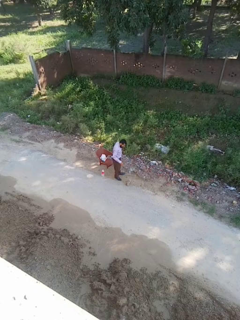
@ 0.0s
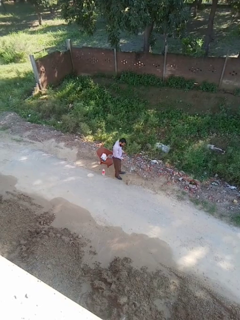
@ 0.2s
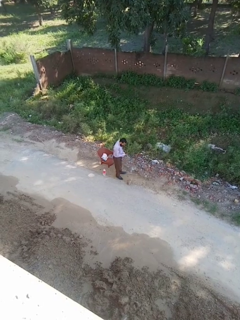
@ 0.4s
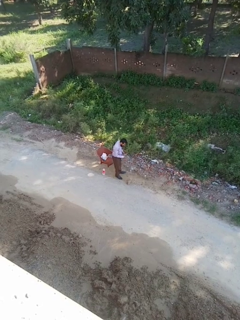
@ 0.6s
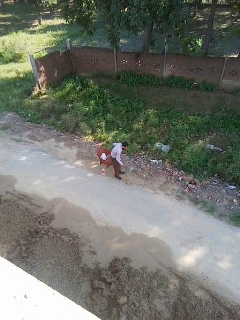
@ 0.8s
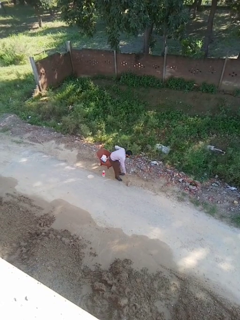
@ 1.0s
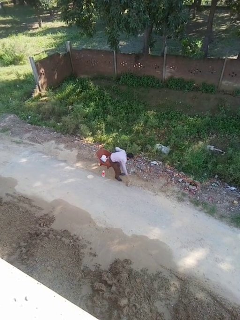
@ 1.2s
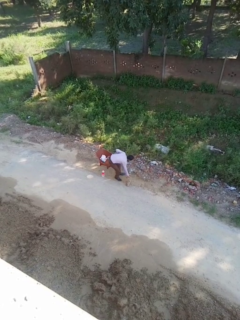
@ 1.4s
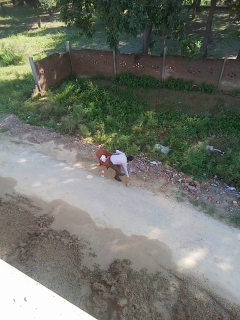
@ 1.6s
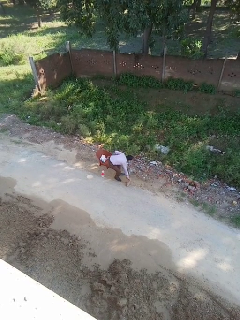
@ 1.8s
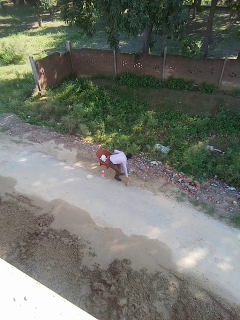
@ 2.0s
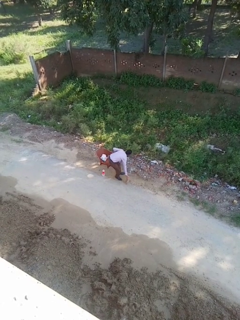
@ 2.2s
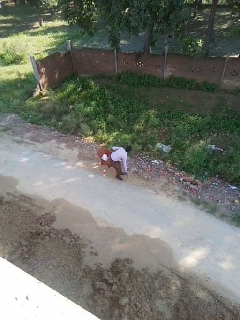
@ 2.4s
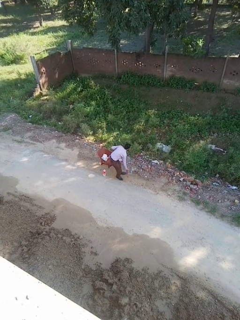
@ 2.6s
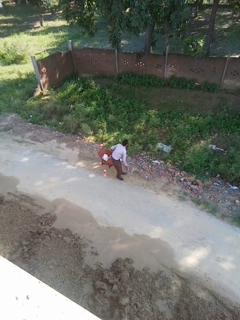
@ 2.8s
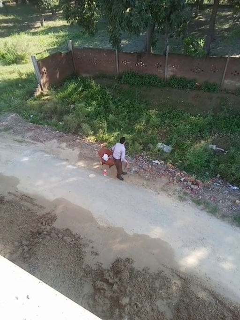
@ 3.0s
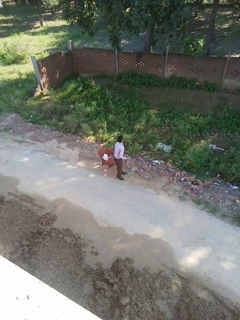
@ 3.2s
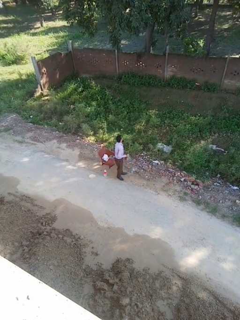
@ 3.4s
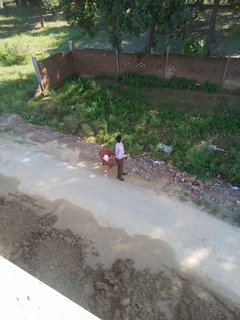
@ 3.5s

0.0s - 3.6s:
person picks up object from floor

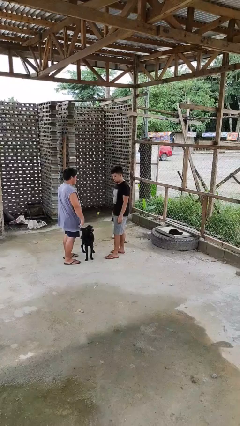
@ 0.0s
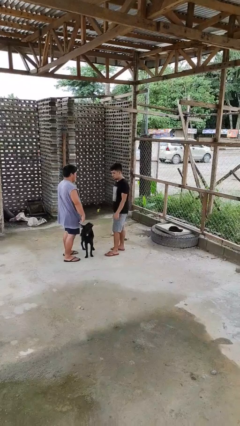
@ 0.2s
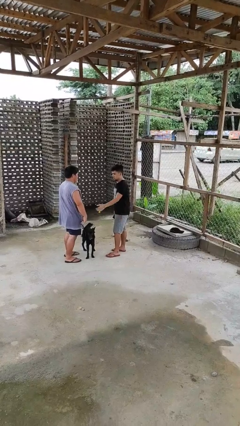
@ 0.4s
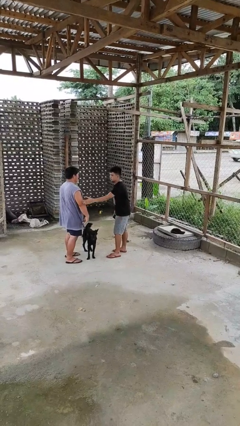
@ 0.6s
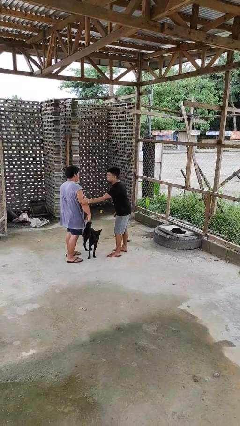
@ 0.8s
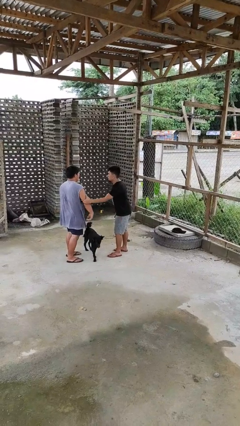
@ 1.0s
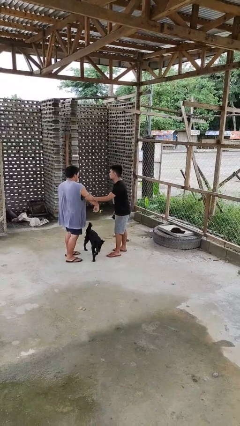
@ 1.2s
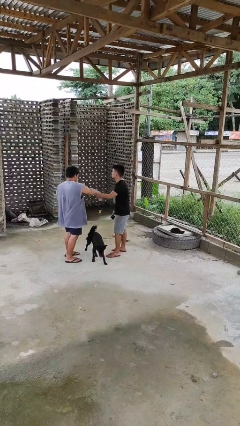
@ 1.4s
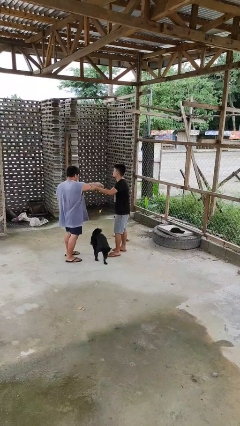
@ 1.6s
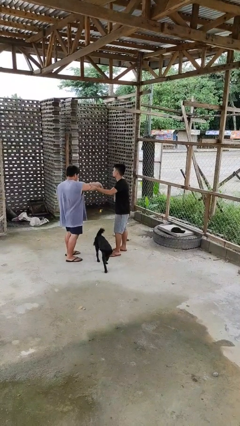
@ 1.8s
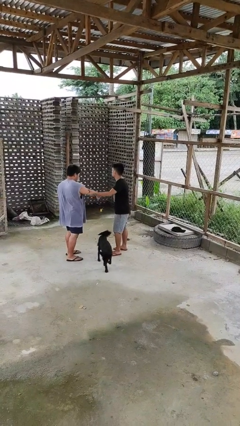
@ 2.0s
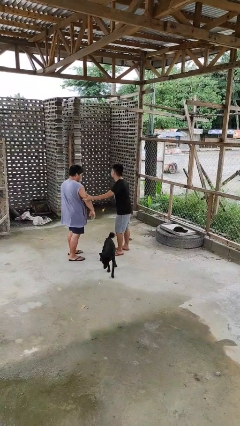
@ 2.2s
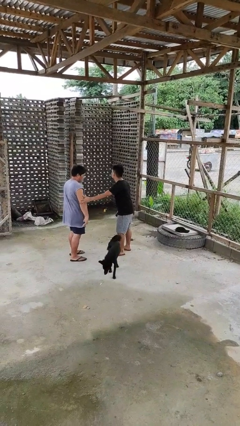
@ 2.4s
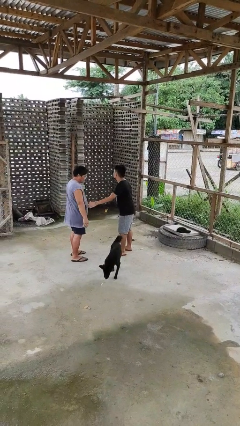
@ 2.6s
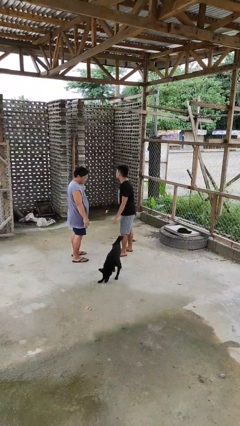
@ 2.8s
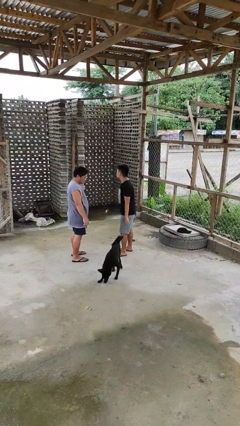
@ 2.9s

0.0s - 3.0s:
person grabs person by bicep

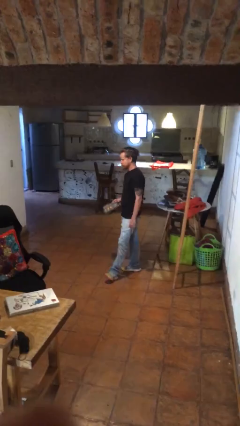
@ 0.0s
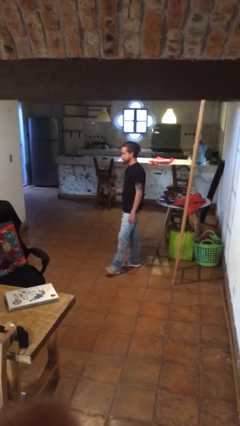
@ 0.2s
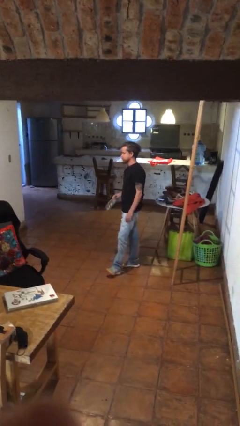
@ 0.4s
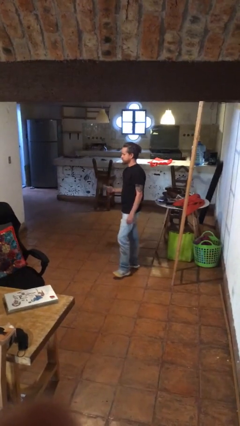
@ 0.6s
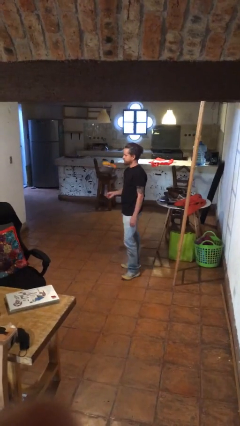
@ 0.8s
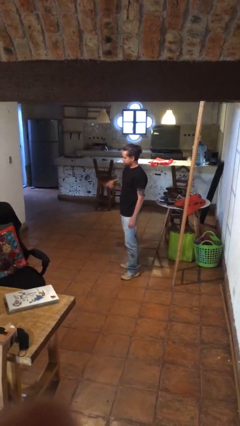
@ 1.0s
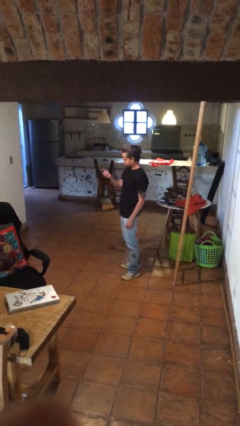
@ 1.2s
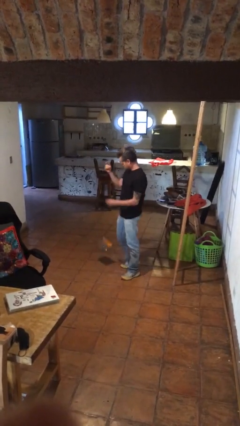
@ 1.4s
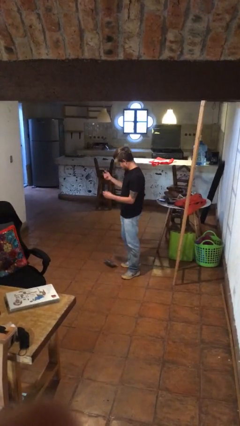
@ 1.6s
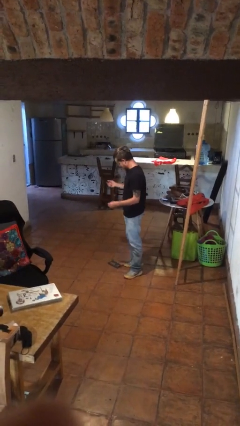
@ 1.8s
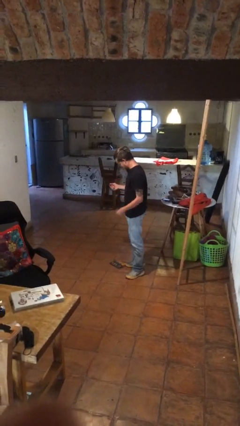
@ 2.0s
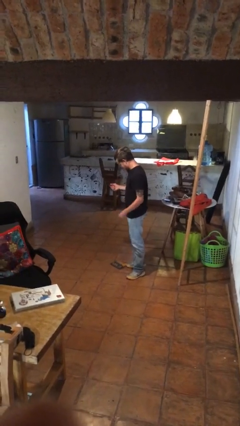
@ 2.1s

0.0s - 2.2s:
person drops object

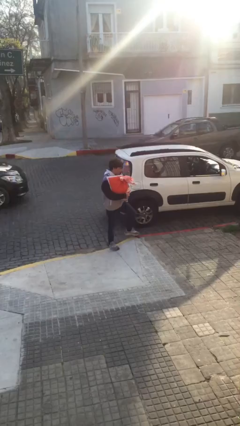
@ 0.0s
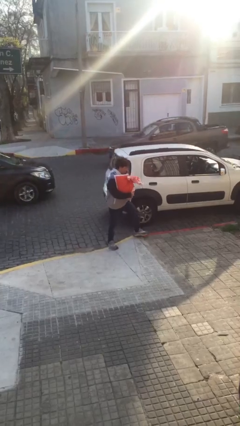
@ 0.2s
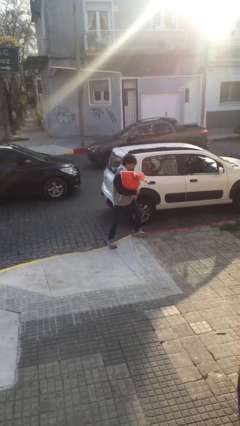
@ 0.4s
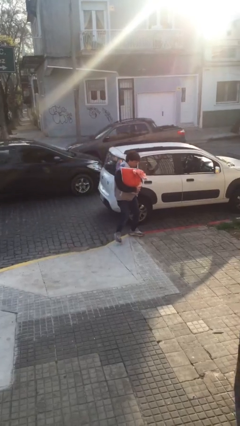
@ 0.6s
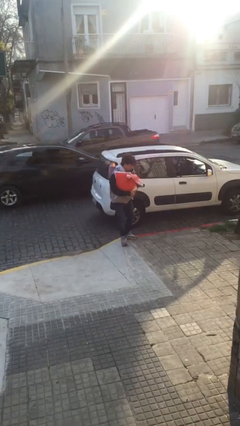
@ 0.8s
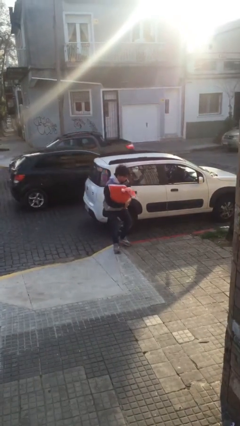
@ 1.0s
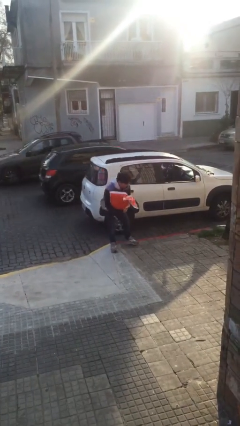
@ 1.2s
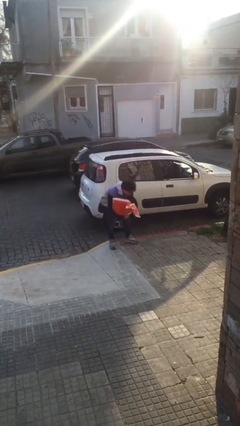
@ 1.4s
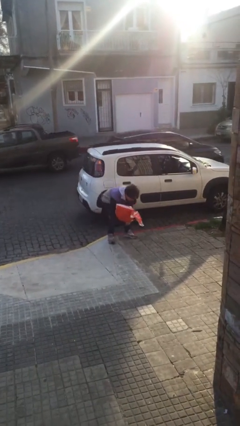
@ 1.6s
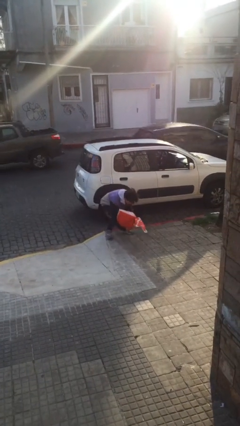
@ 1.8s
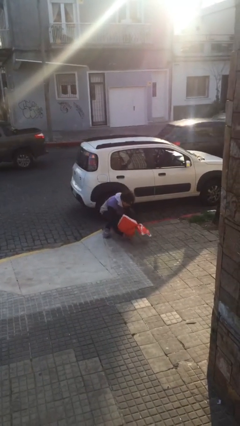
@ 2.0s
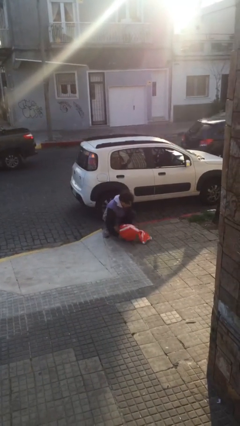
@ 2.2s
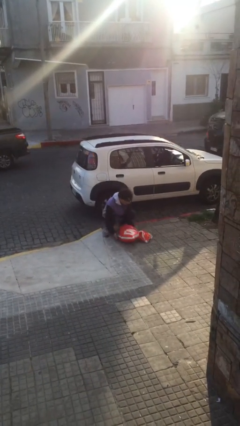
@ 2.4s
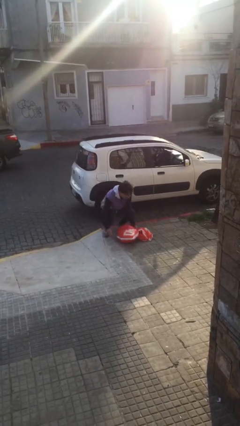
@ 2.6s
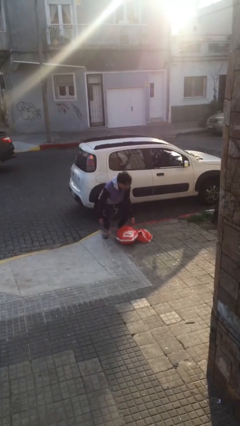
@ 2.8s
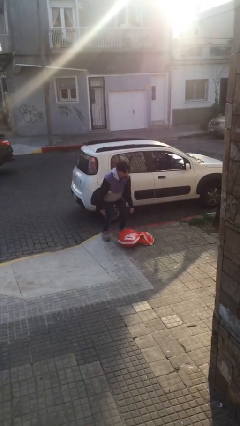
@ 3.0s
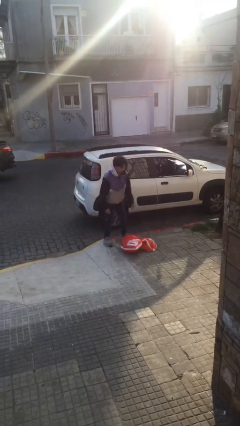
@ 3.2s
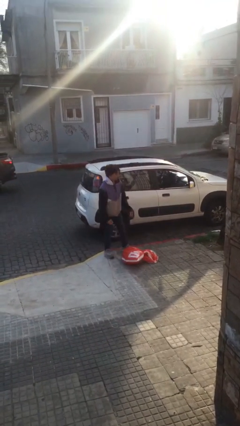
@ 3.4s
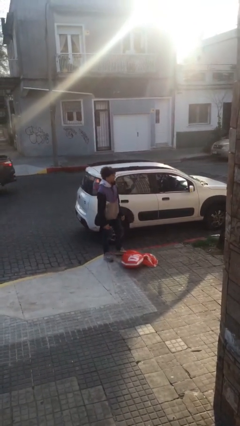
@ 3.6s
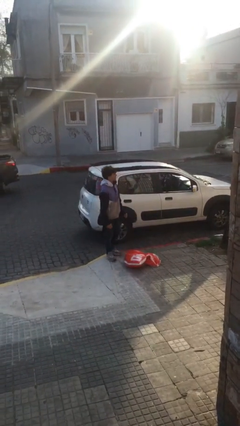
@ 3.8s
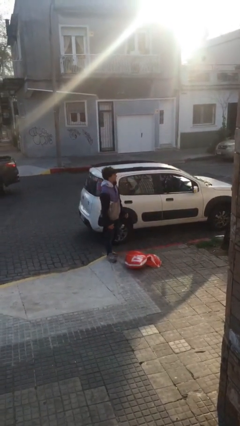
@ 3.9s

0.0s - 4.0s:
person puts down object on floor

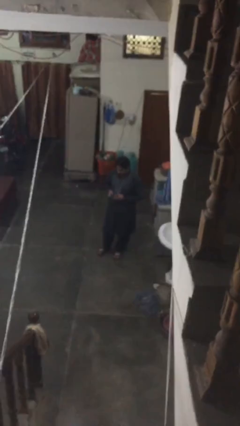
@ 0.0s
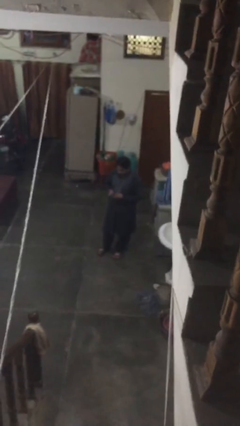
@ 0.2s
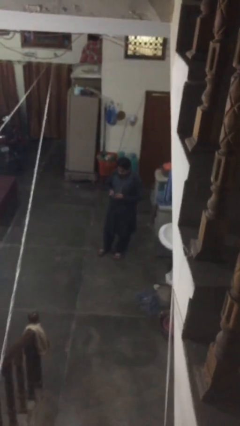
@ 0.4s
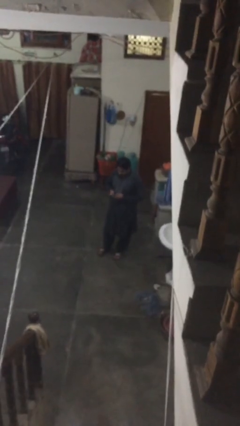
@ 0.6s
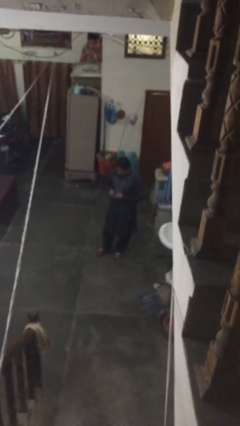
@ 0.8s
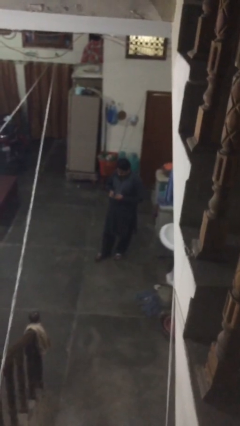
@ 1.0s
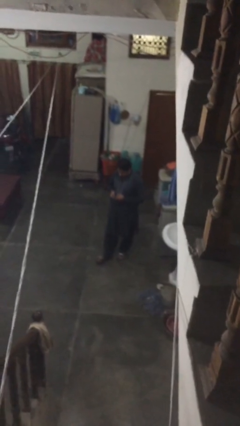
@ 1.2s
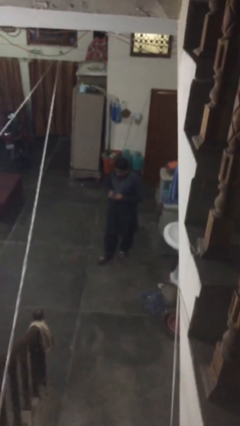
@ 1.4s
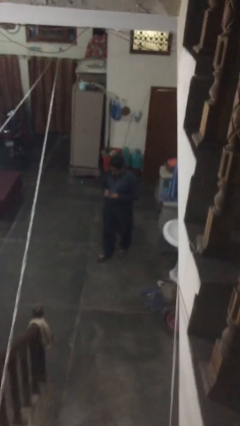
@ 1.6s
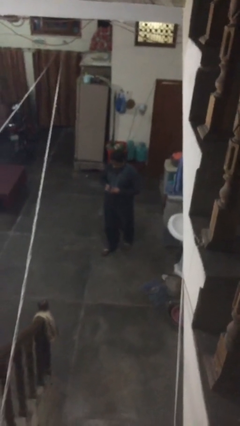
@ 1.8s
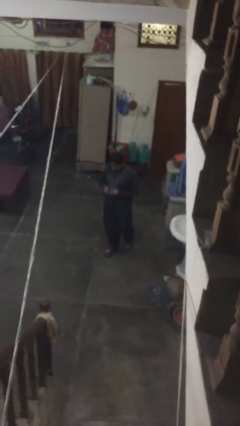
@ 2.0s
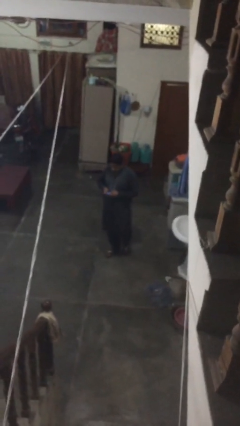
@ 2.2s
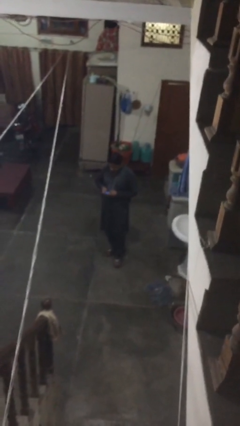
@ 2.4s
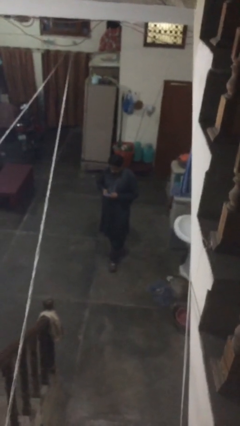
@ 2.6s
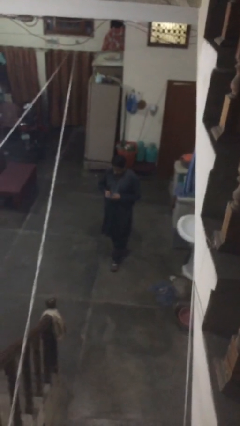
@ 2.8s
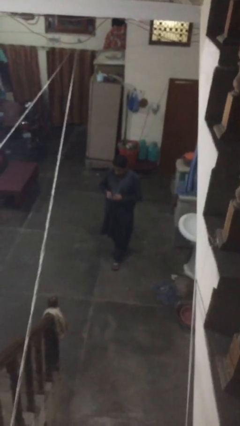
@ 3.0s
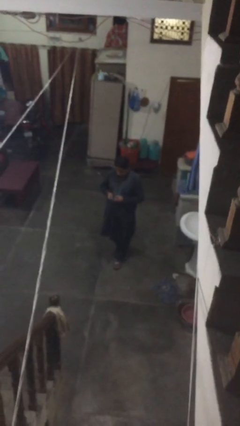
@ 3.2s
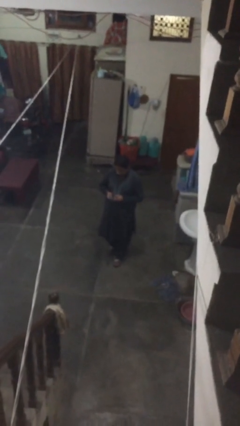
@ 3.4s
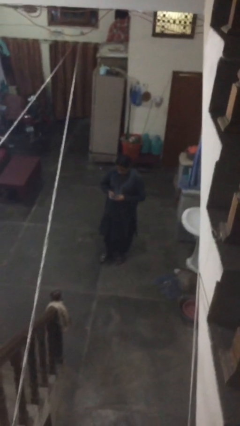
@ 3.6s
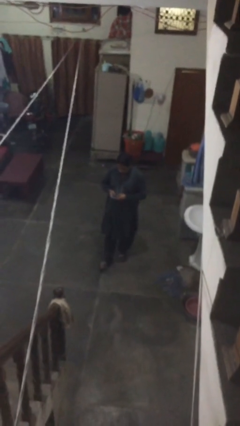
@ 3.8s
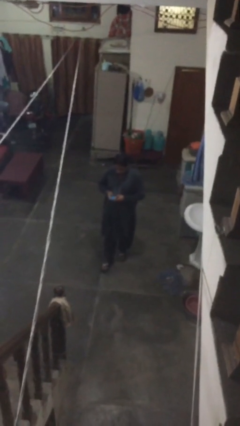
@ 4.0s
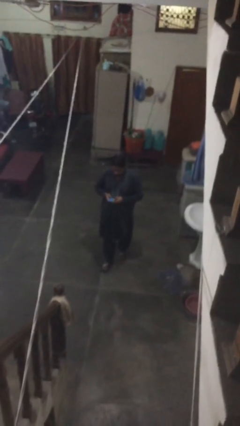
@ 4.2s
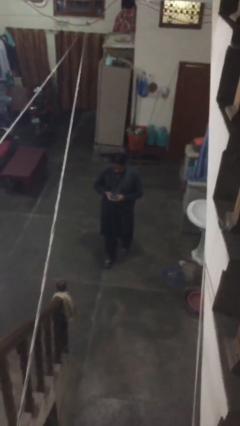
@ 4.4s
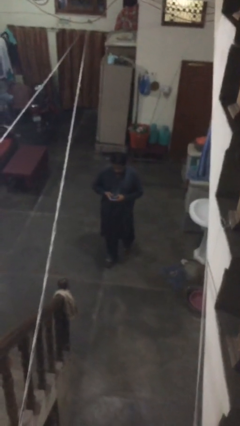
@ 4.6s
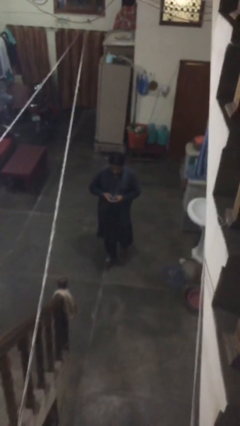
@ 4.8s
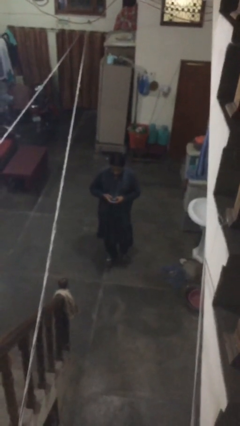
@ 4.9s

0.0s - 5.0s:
person texts on phone

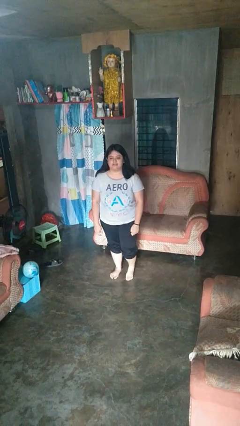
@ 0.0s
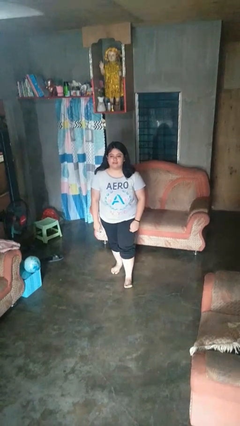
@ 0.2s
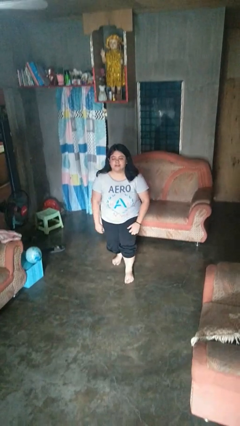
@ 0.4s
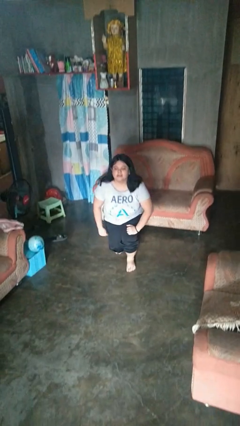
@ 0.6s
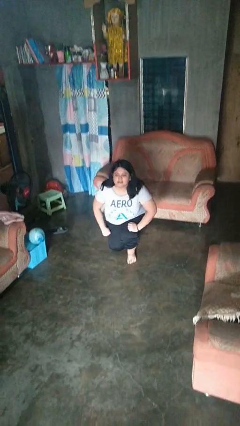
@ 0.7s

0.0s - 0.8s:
person kneels
